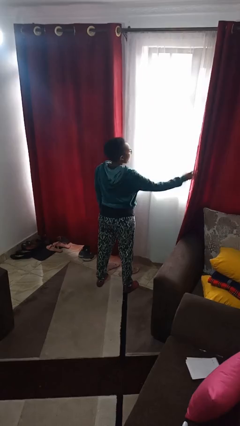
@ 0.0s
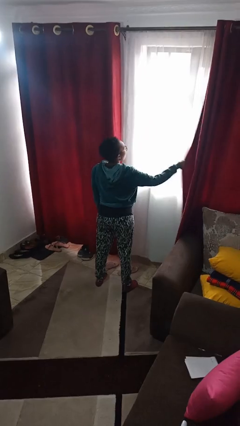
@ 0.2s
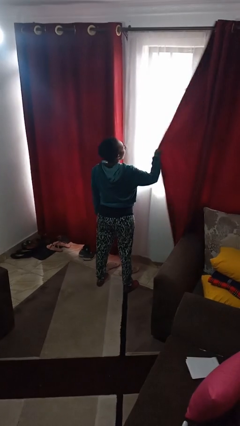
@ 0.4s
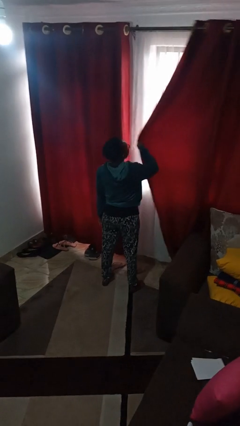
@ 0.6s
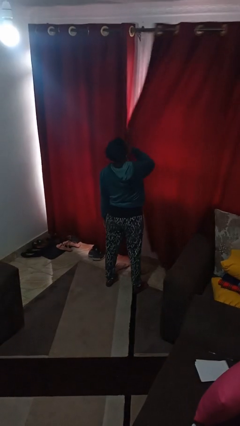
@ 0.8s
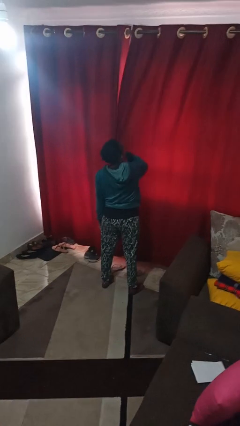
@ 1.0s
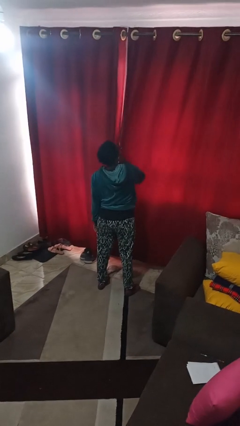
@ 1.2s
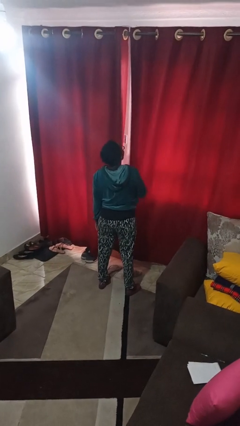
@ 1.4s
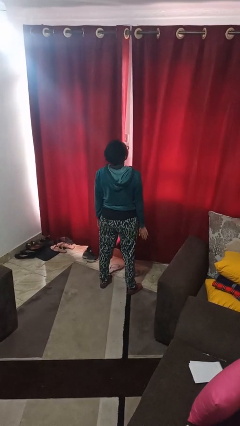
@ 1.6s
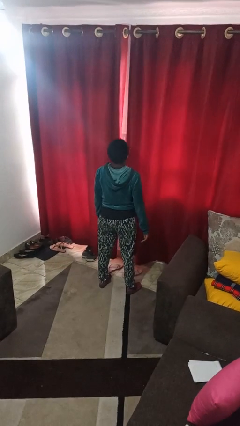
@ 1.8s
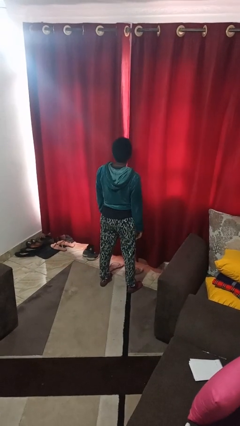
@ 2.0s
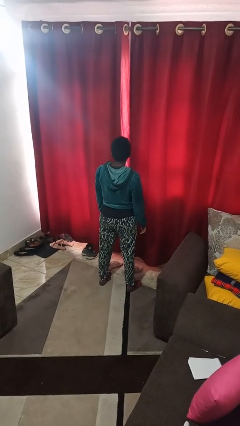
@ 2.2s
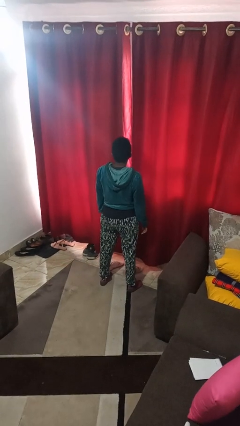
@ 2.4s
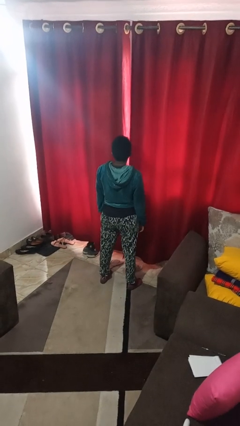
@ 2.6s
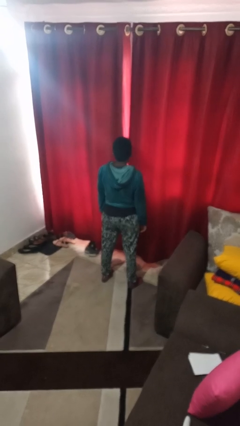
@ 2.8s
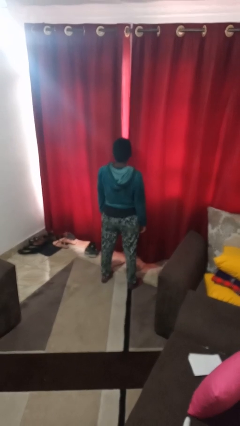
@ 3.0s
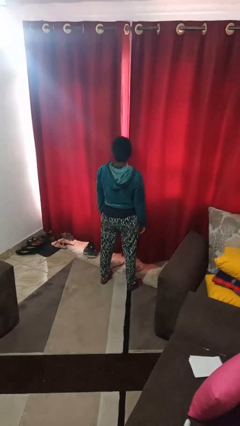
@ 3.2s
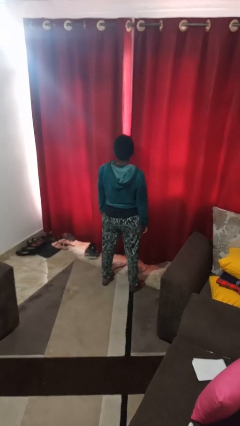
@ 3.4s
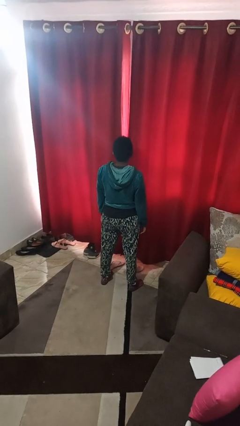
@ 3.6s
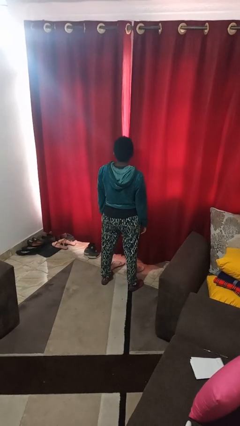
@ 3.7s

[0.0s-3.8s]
person closes curtains

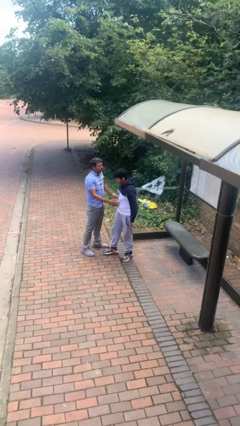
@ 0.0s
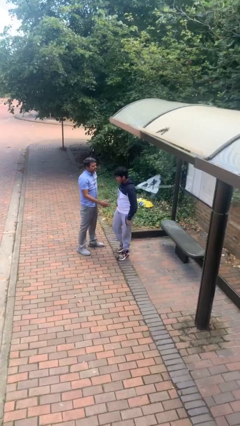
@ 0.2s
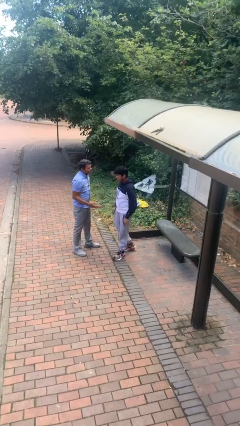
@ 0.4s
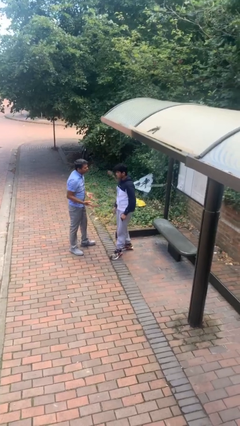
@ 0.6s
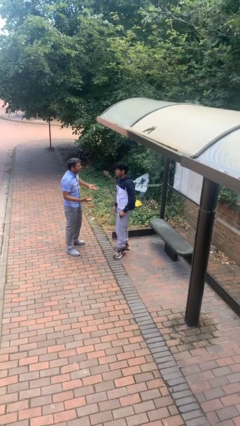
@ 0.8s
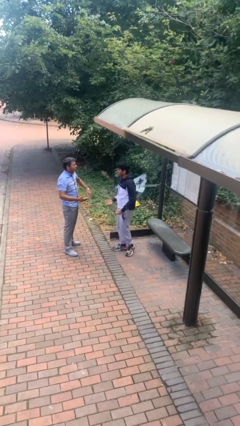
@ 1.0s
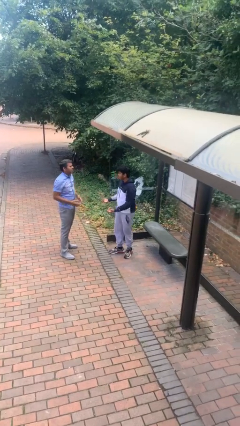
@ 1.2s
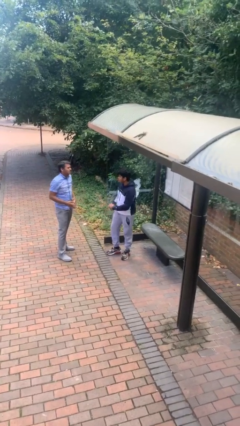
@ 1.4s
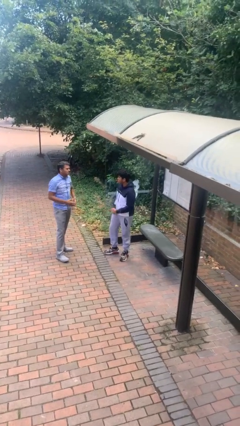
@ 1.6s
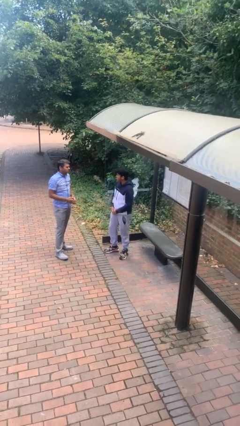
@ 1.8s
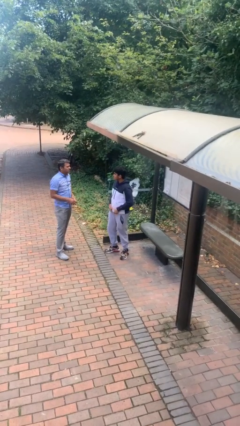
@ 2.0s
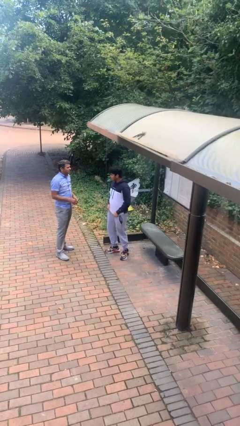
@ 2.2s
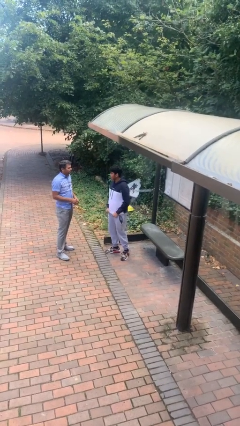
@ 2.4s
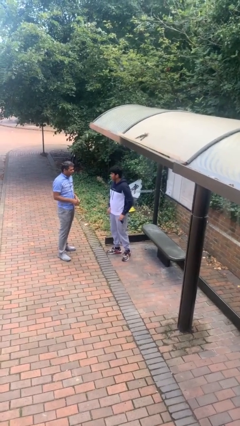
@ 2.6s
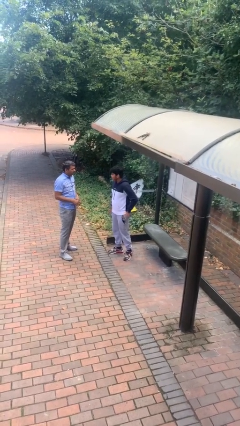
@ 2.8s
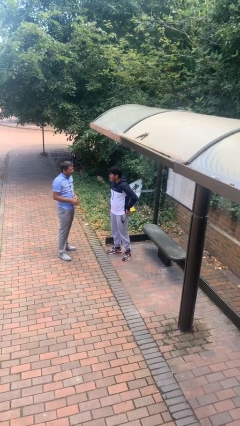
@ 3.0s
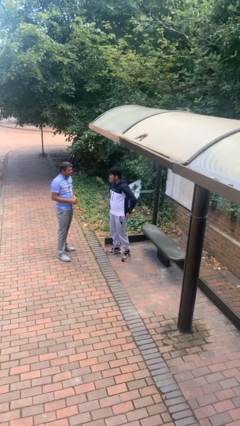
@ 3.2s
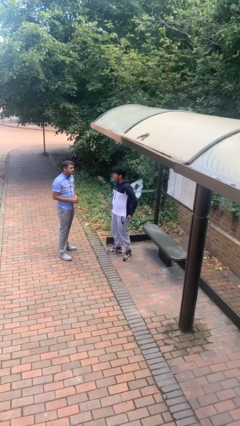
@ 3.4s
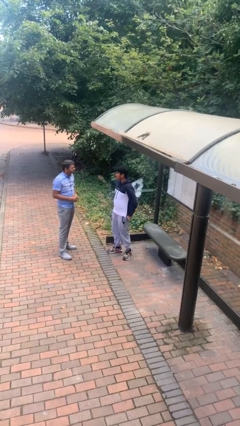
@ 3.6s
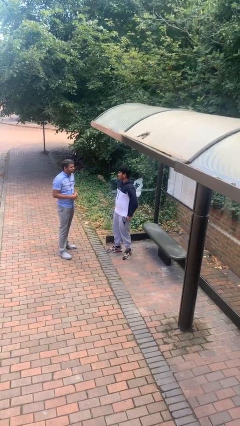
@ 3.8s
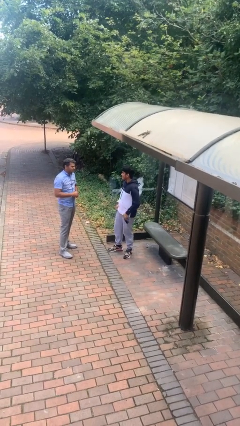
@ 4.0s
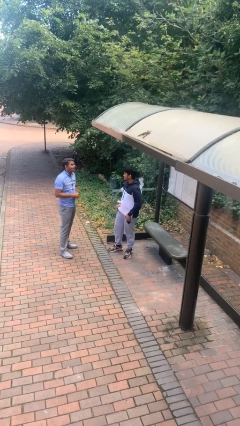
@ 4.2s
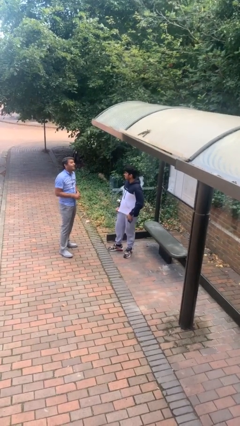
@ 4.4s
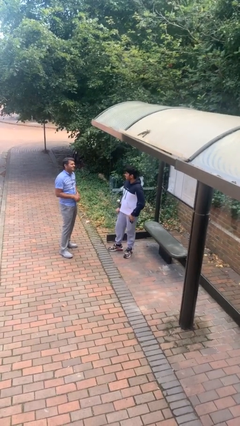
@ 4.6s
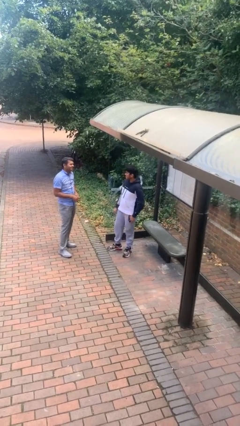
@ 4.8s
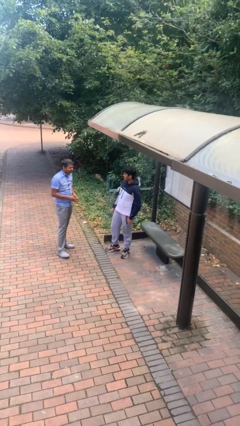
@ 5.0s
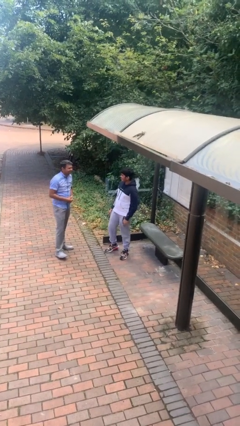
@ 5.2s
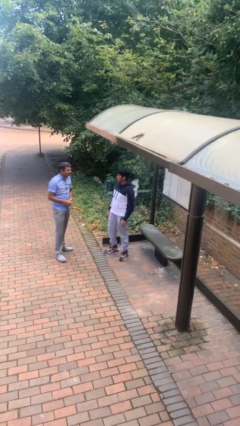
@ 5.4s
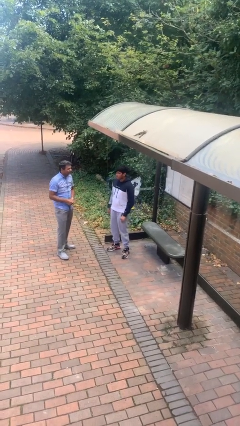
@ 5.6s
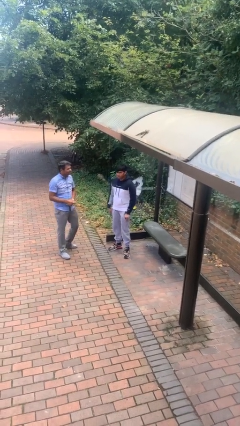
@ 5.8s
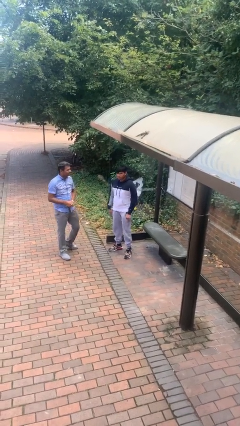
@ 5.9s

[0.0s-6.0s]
person talks to person

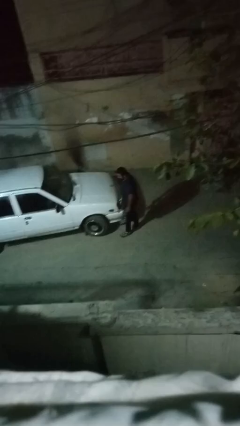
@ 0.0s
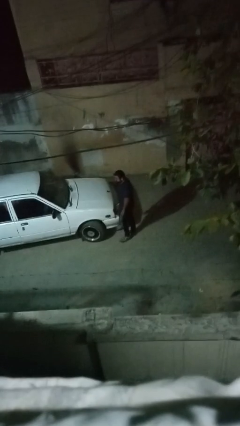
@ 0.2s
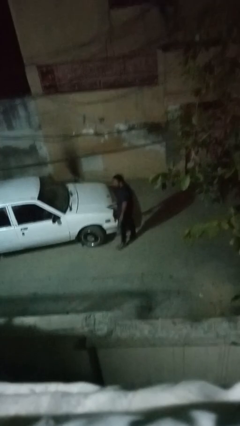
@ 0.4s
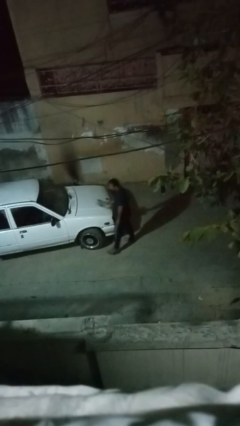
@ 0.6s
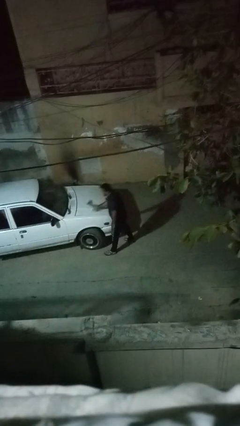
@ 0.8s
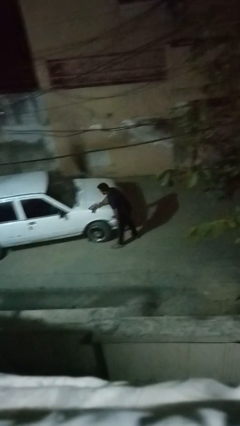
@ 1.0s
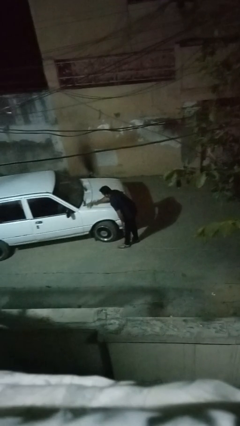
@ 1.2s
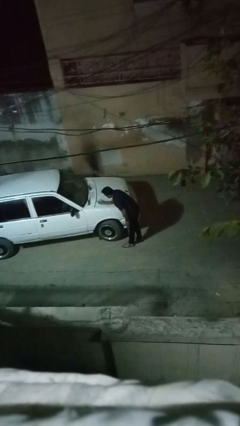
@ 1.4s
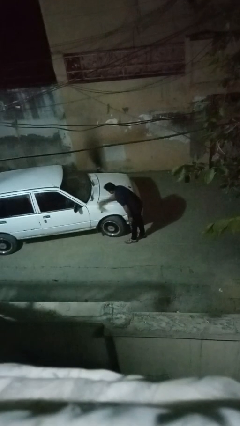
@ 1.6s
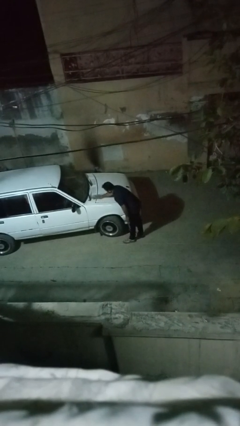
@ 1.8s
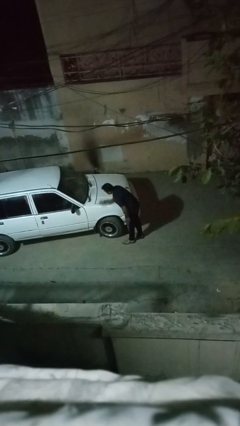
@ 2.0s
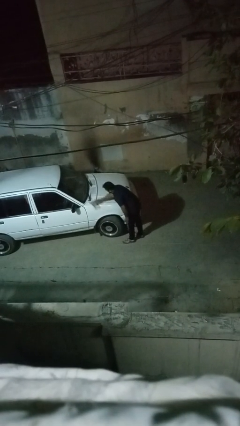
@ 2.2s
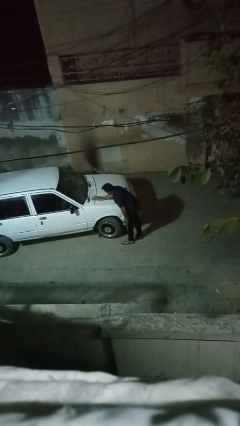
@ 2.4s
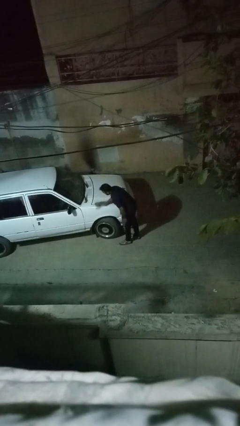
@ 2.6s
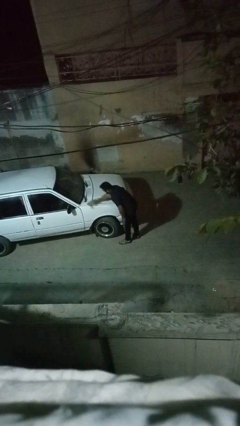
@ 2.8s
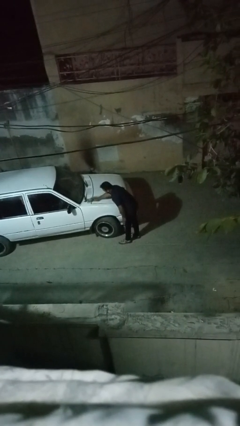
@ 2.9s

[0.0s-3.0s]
person polishes car with rag

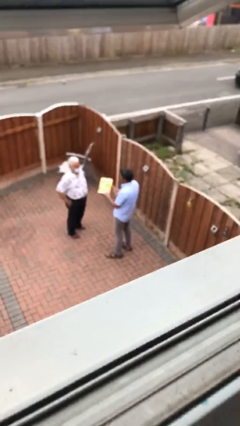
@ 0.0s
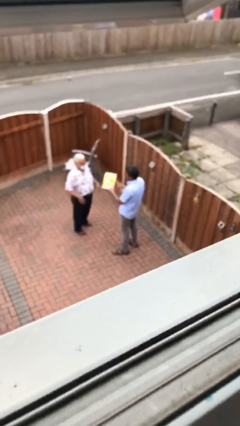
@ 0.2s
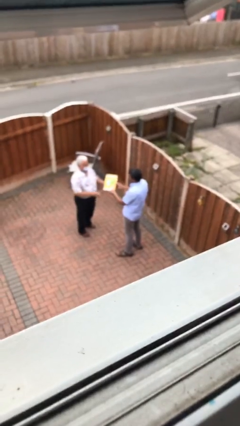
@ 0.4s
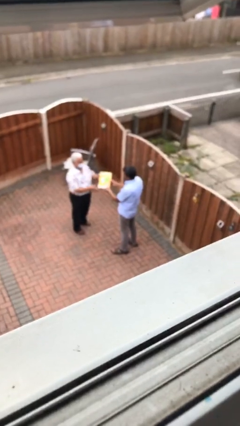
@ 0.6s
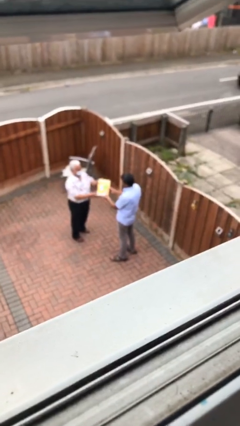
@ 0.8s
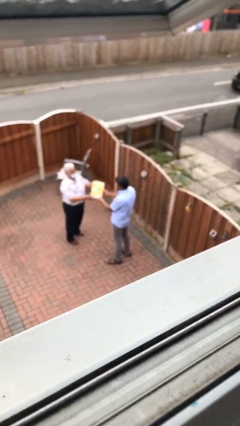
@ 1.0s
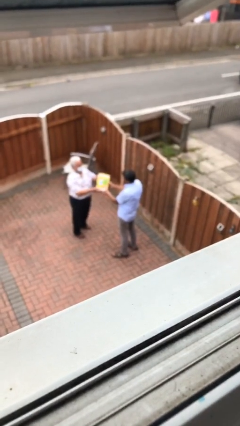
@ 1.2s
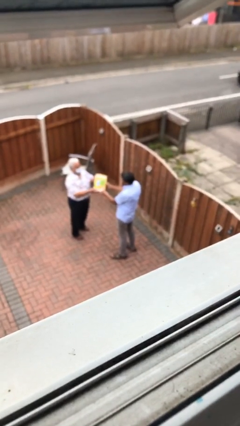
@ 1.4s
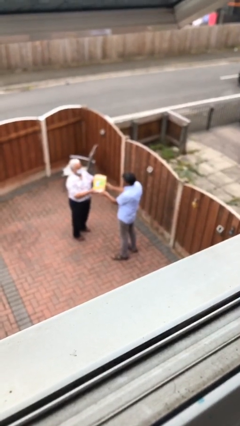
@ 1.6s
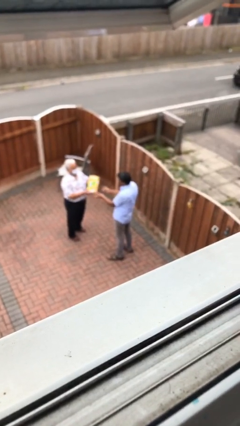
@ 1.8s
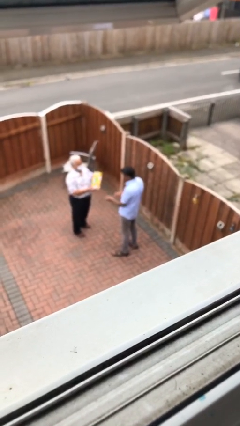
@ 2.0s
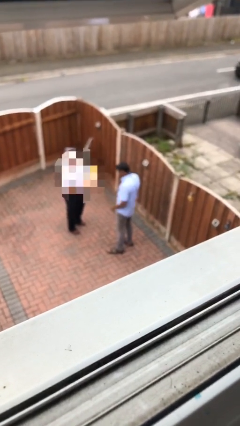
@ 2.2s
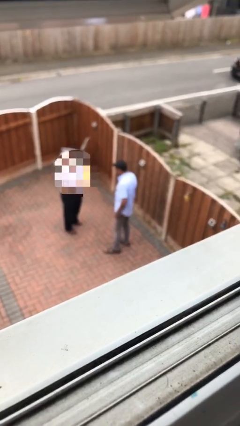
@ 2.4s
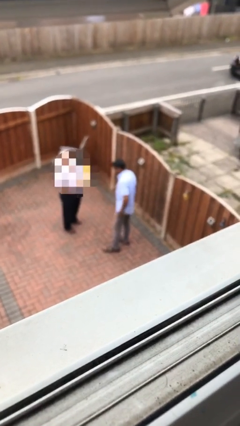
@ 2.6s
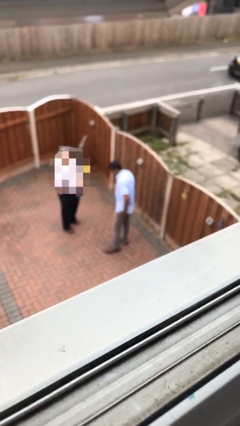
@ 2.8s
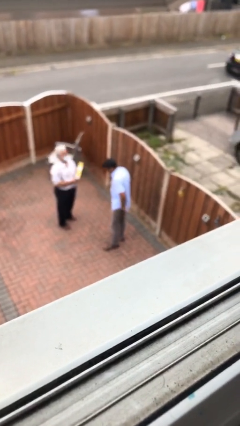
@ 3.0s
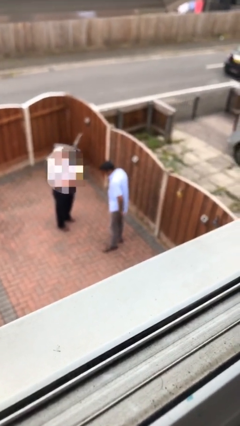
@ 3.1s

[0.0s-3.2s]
person transfers object to person

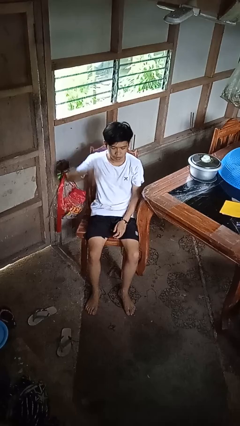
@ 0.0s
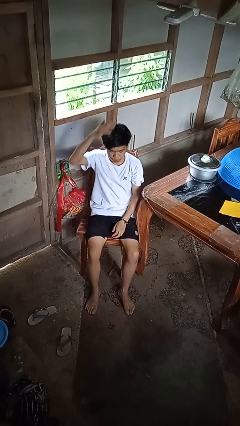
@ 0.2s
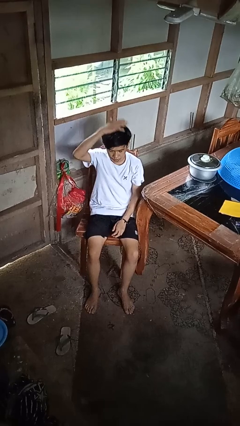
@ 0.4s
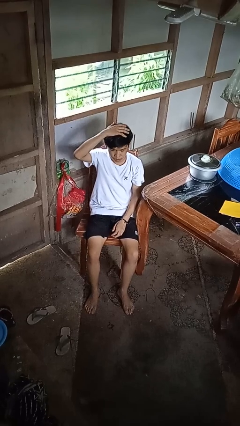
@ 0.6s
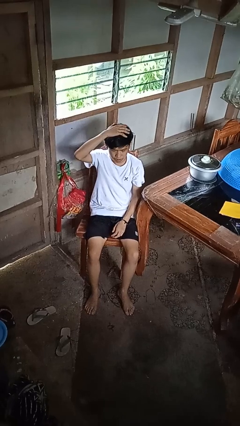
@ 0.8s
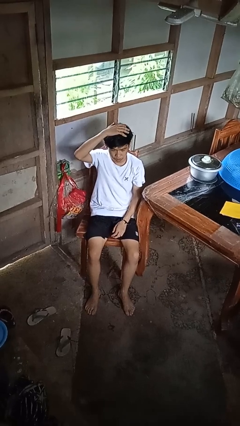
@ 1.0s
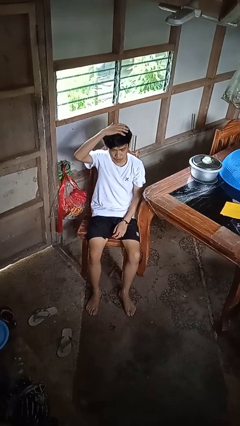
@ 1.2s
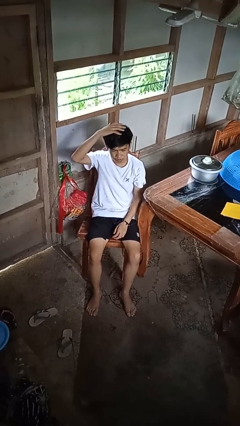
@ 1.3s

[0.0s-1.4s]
person pats head

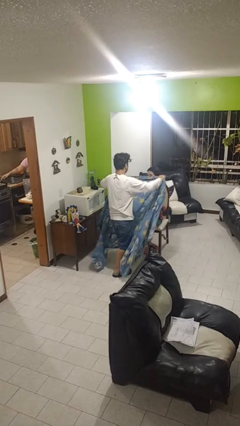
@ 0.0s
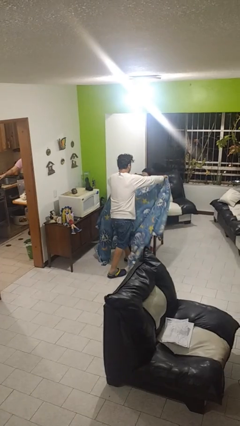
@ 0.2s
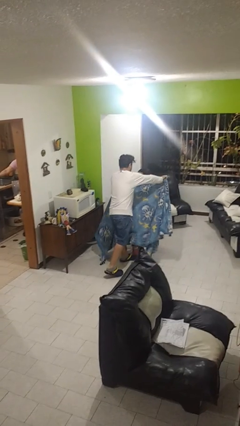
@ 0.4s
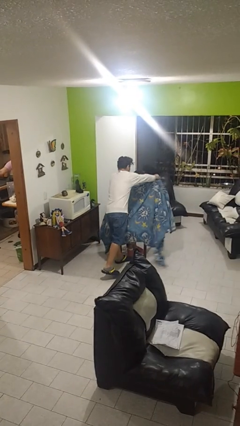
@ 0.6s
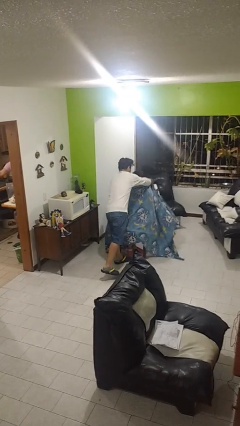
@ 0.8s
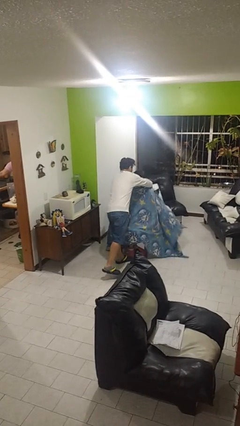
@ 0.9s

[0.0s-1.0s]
person covers friend with blanket
